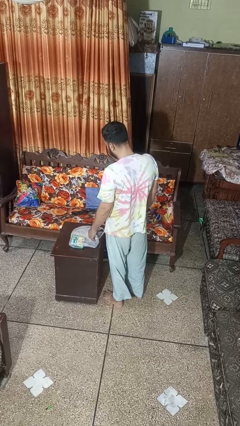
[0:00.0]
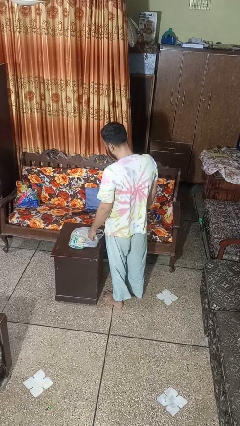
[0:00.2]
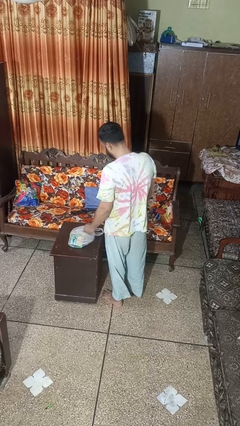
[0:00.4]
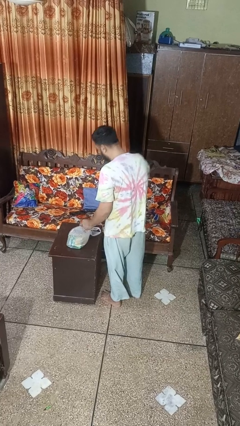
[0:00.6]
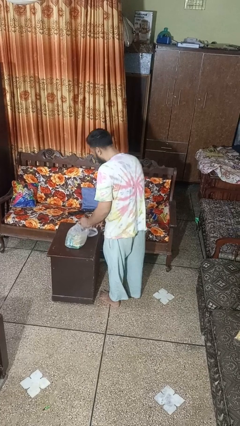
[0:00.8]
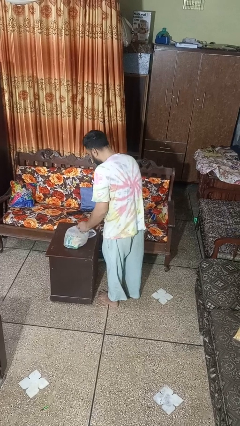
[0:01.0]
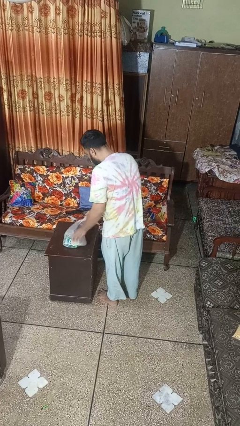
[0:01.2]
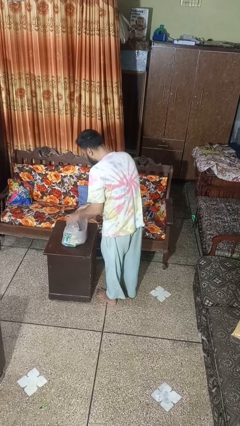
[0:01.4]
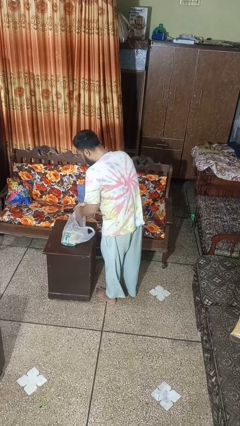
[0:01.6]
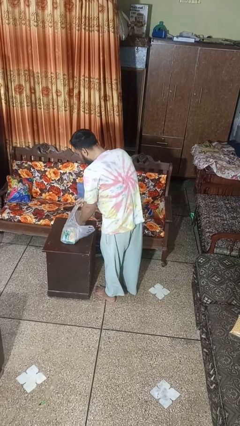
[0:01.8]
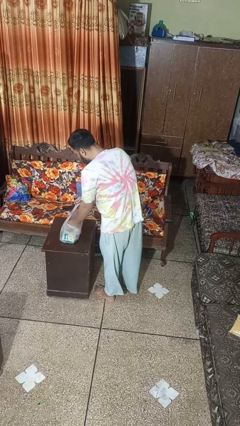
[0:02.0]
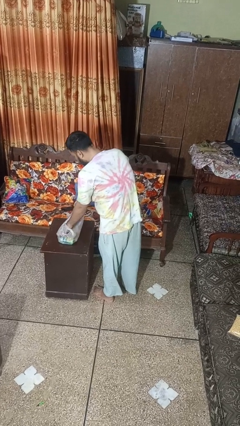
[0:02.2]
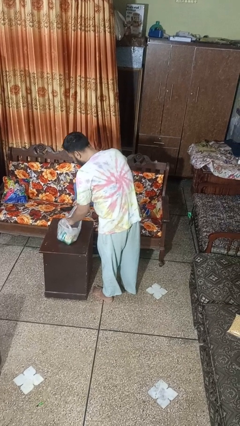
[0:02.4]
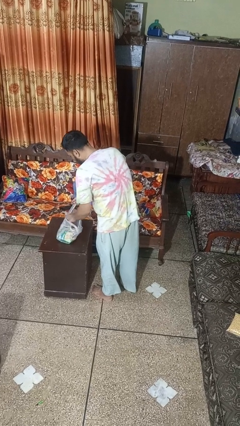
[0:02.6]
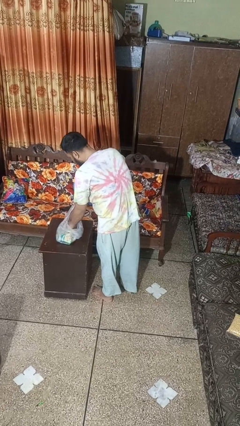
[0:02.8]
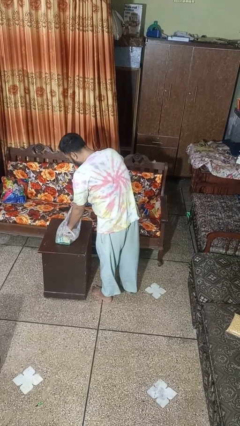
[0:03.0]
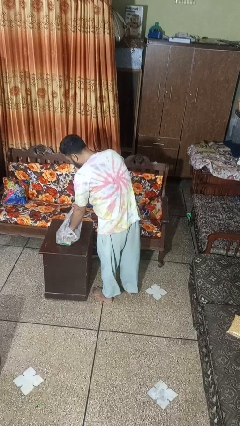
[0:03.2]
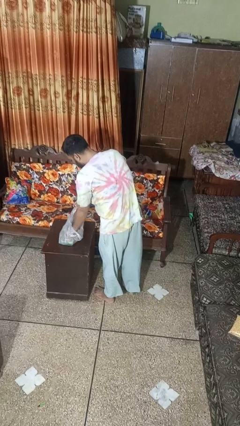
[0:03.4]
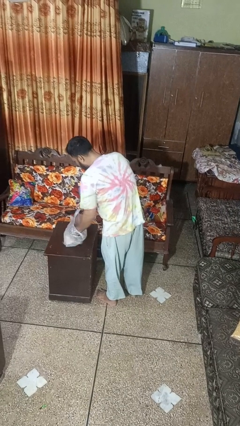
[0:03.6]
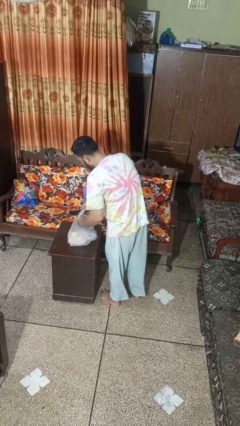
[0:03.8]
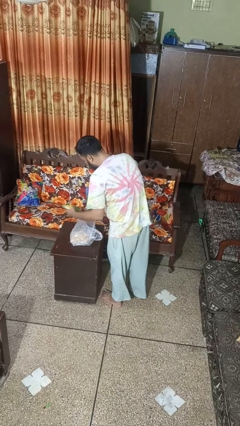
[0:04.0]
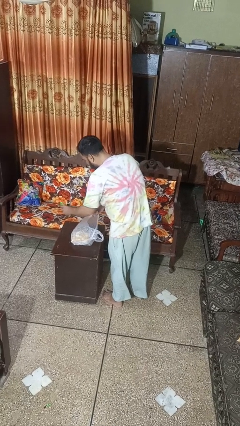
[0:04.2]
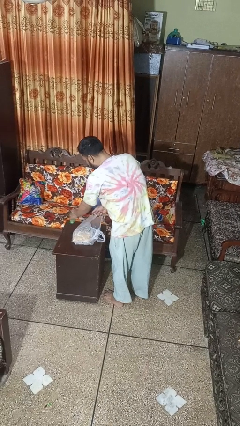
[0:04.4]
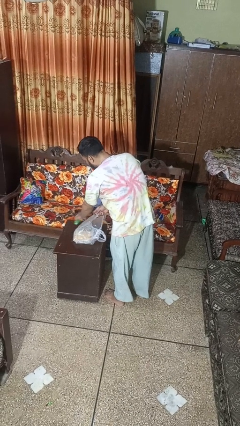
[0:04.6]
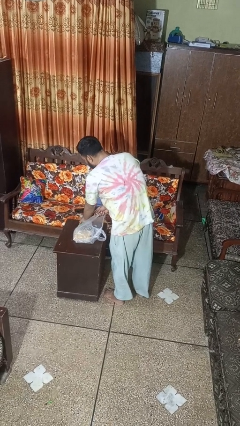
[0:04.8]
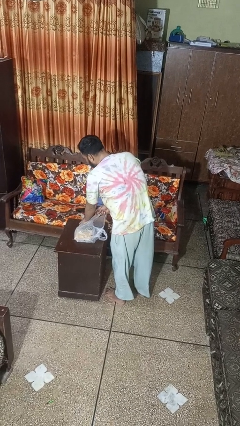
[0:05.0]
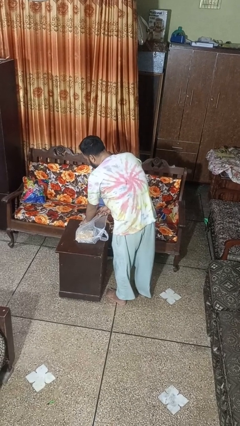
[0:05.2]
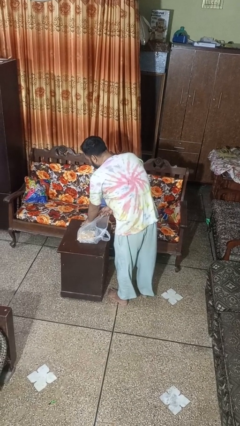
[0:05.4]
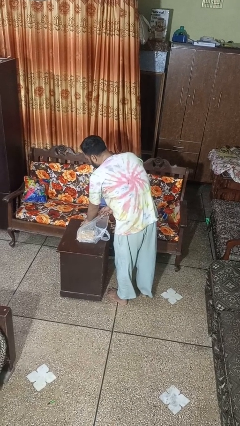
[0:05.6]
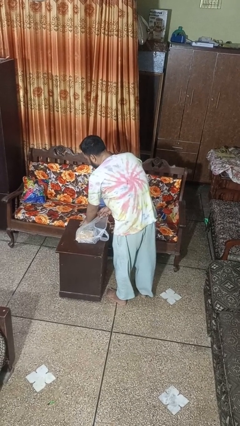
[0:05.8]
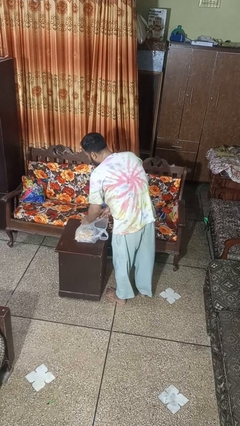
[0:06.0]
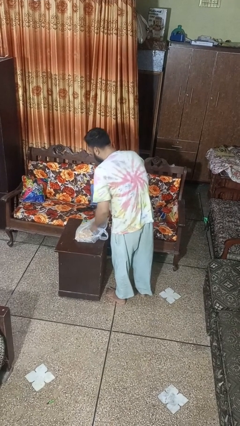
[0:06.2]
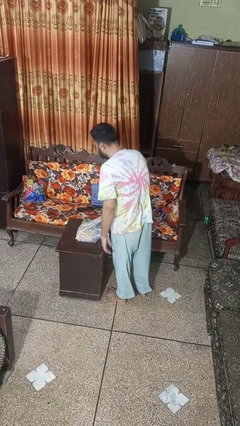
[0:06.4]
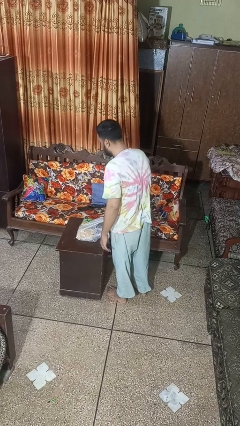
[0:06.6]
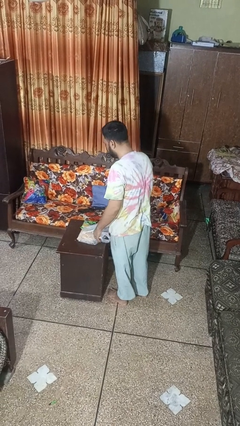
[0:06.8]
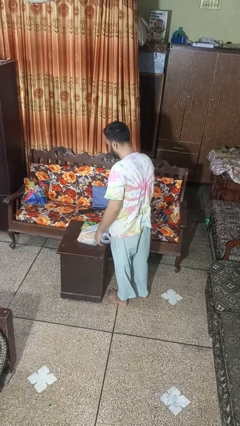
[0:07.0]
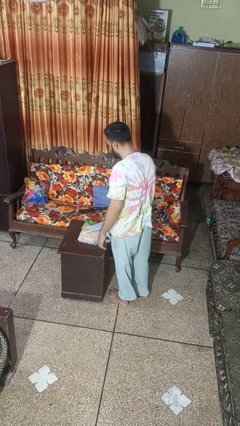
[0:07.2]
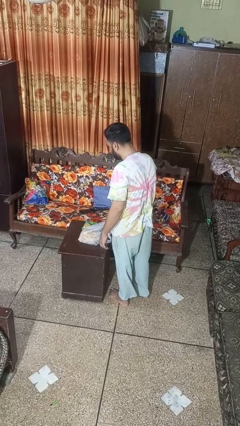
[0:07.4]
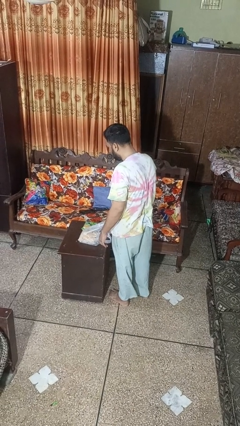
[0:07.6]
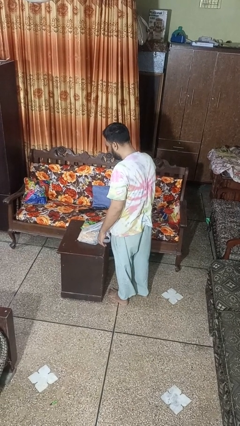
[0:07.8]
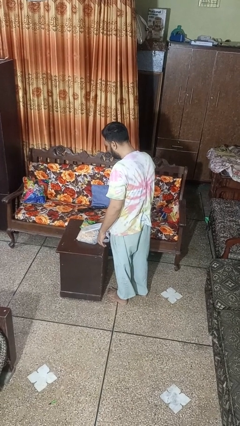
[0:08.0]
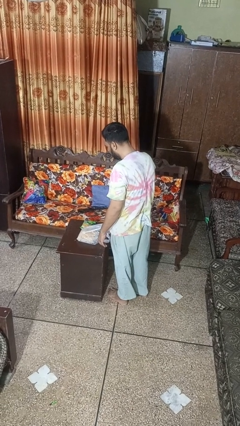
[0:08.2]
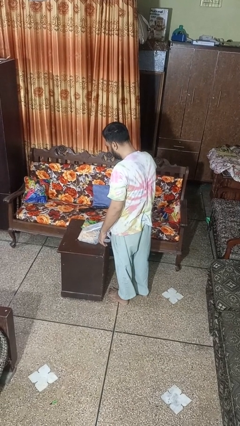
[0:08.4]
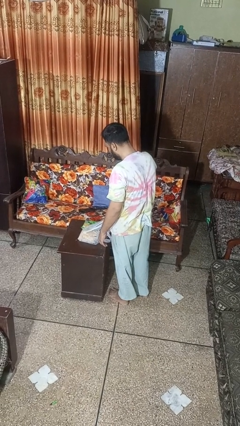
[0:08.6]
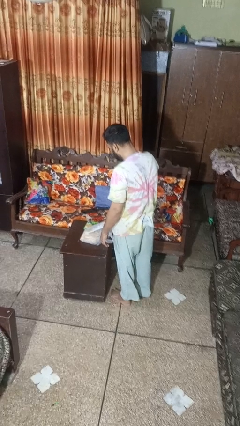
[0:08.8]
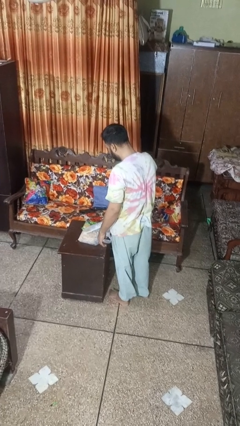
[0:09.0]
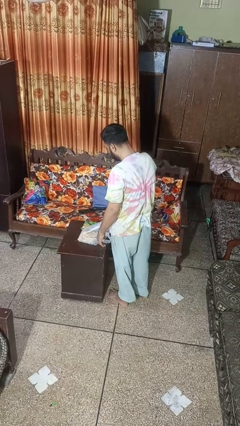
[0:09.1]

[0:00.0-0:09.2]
person takes object from bag

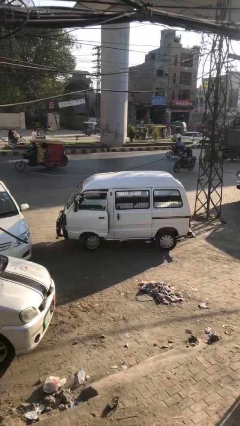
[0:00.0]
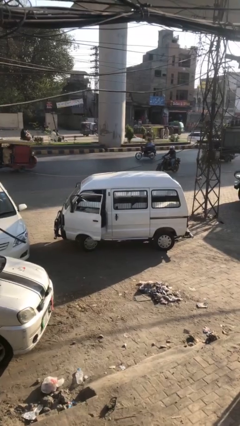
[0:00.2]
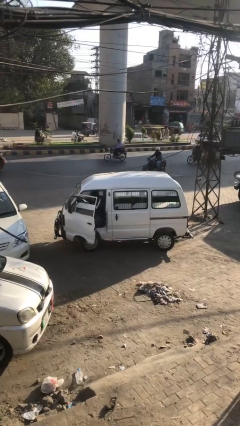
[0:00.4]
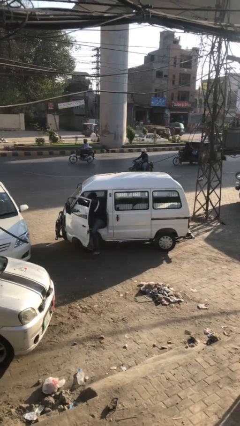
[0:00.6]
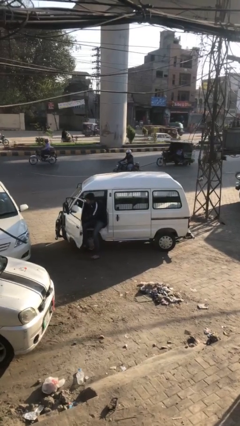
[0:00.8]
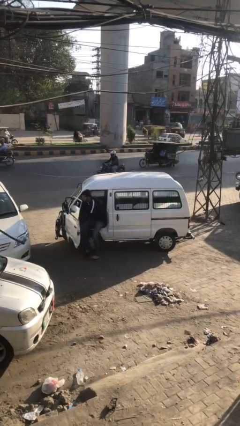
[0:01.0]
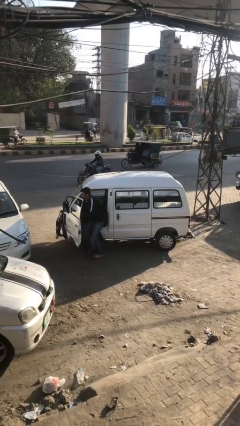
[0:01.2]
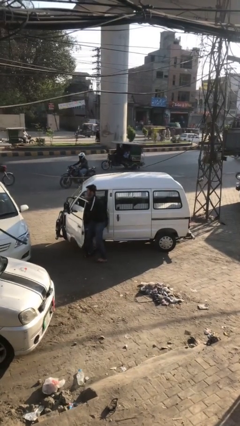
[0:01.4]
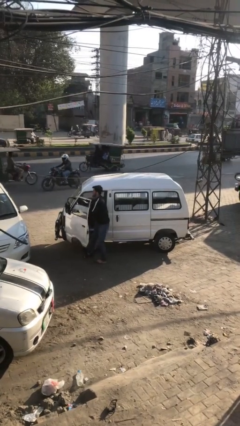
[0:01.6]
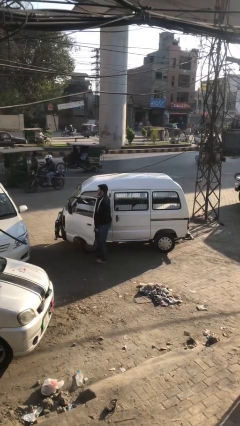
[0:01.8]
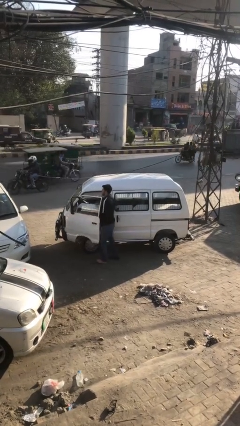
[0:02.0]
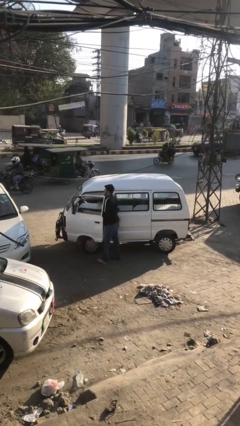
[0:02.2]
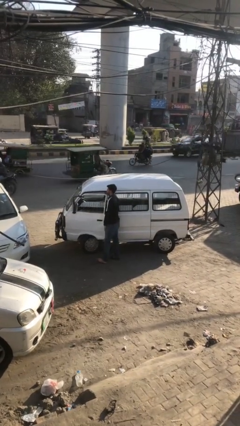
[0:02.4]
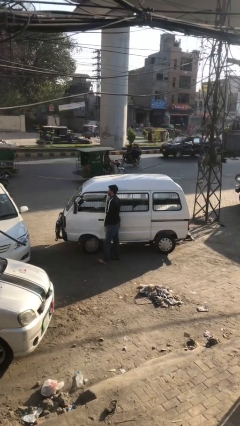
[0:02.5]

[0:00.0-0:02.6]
car drops off person

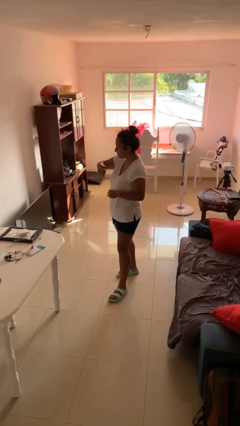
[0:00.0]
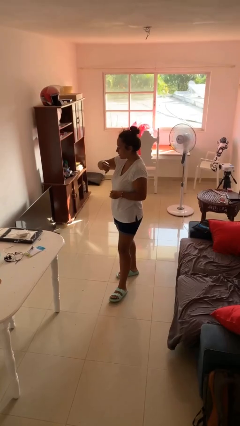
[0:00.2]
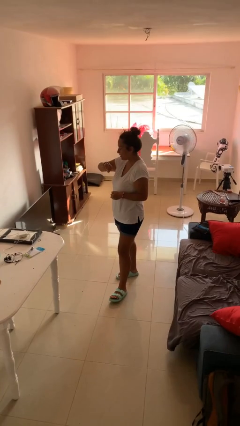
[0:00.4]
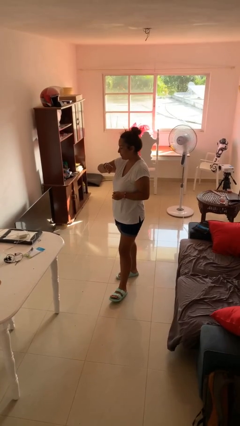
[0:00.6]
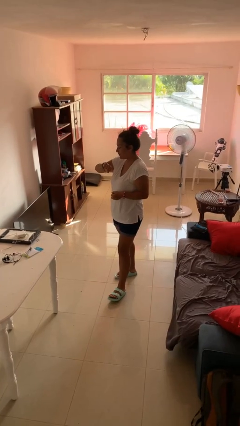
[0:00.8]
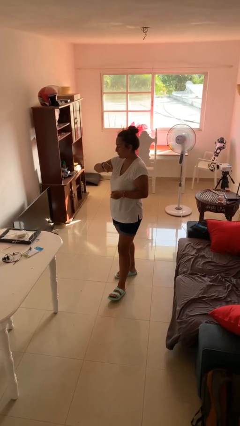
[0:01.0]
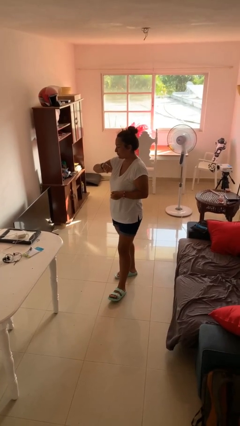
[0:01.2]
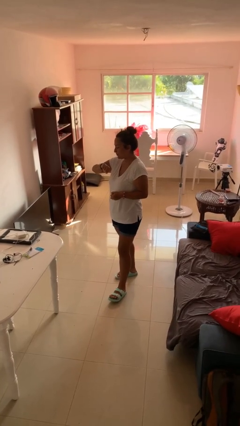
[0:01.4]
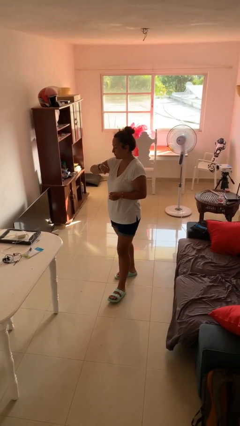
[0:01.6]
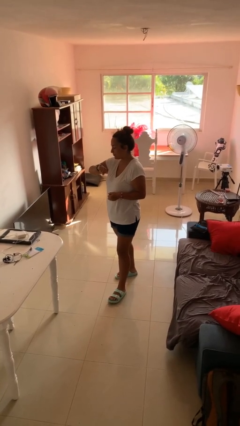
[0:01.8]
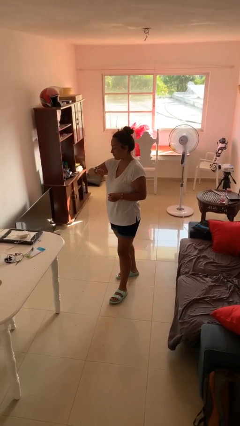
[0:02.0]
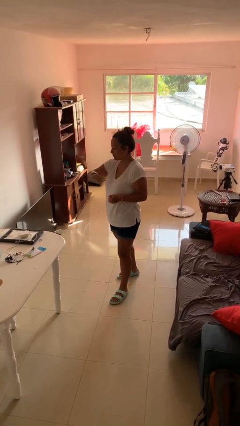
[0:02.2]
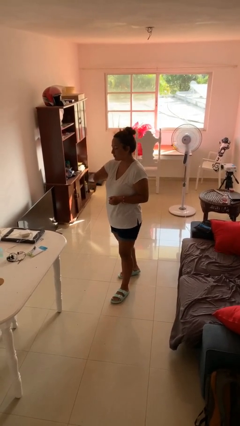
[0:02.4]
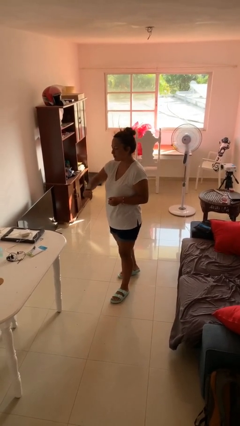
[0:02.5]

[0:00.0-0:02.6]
person looks at wristwatch

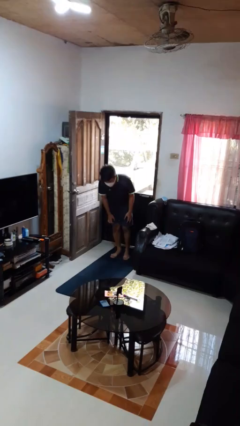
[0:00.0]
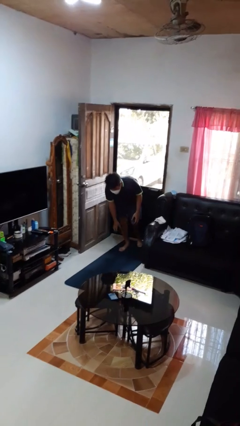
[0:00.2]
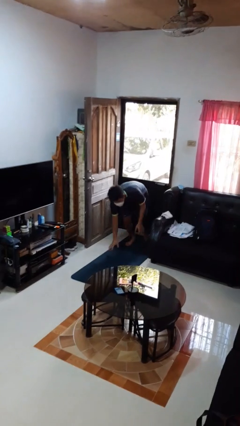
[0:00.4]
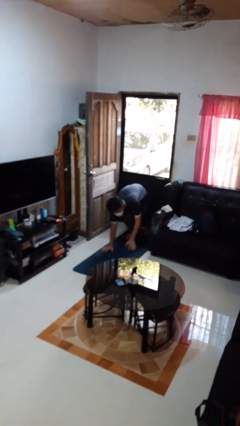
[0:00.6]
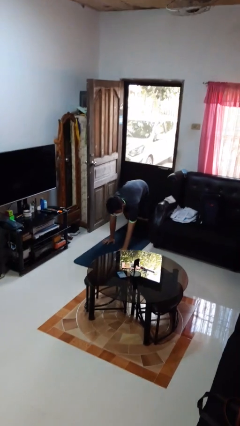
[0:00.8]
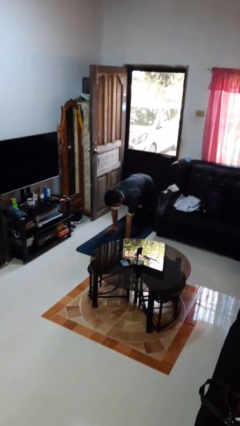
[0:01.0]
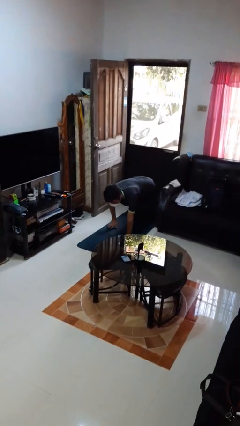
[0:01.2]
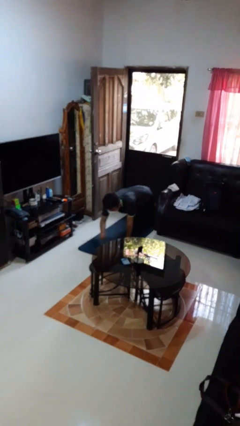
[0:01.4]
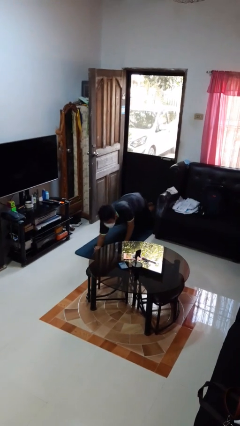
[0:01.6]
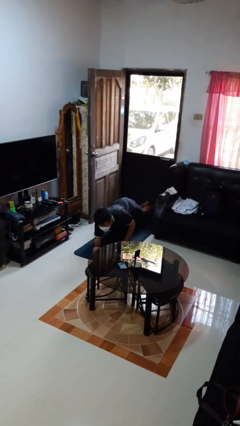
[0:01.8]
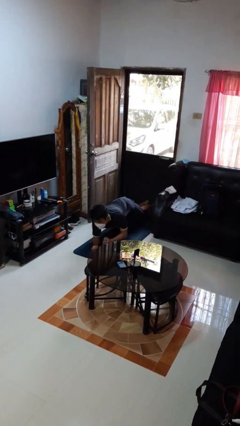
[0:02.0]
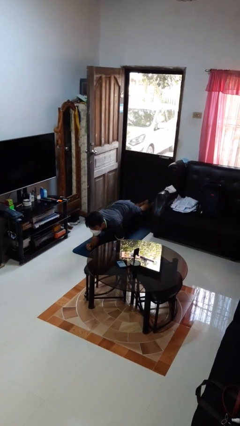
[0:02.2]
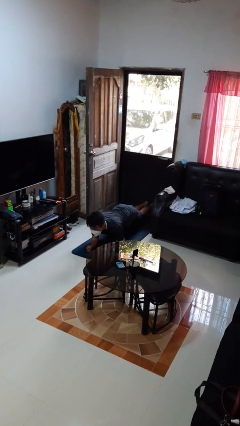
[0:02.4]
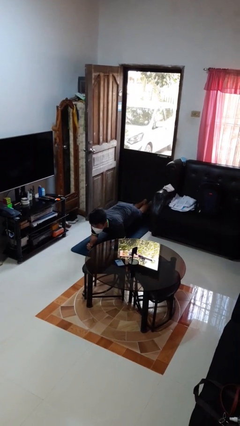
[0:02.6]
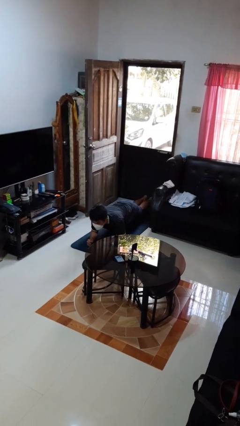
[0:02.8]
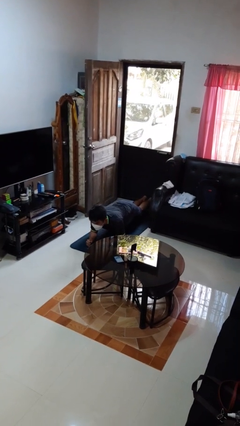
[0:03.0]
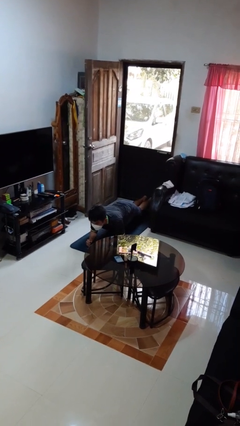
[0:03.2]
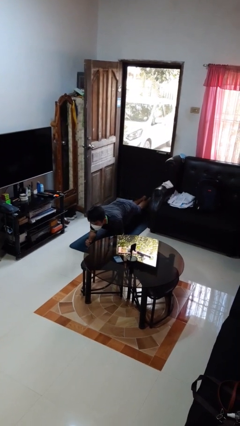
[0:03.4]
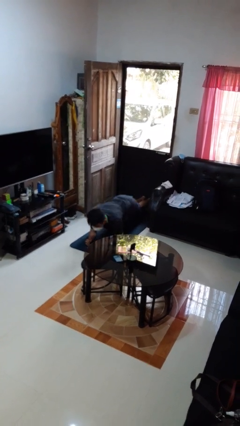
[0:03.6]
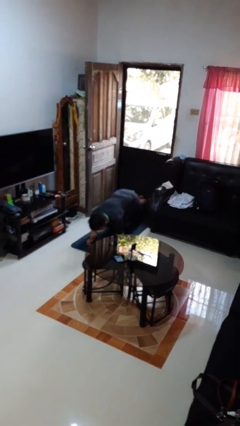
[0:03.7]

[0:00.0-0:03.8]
person exercises with plank
